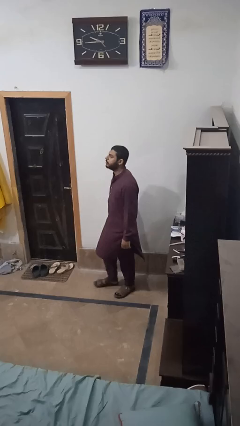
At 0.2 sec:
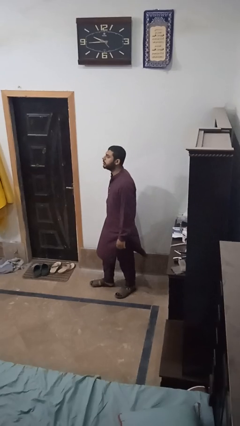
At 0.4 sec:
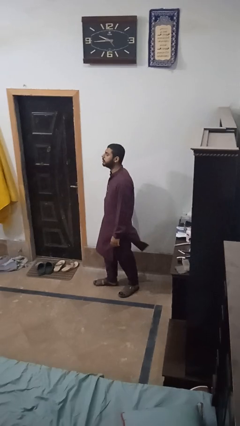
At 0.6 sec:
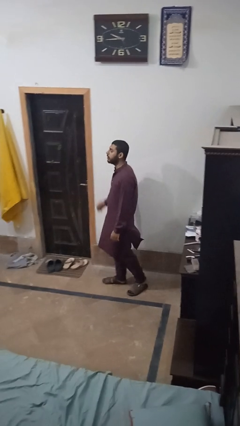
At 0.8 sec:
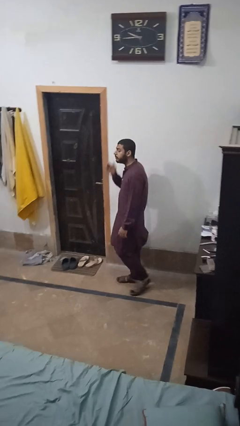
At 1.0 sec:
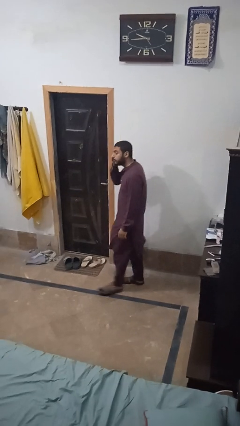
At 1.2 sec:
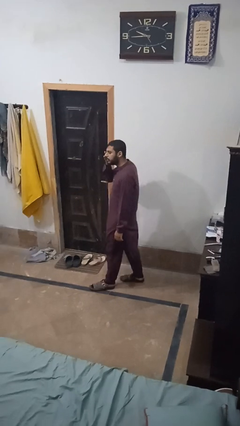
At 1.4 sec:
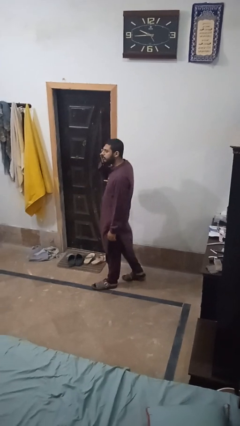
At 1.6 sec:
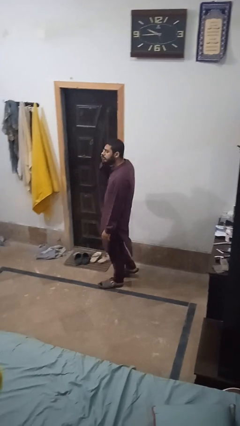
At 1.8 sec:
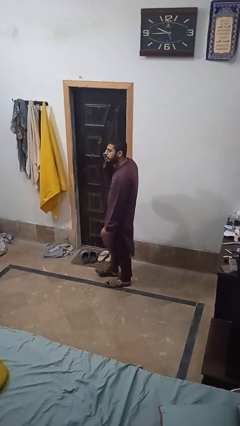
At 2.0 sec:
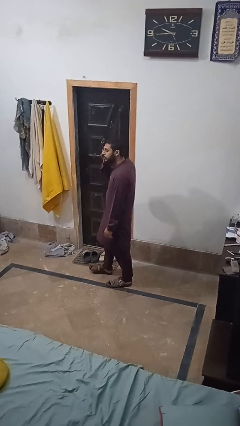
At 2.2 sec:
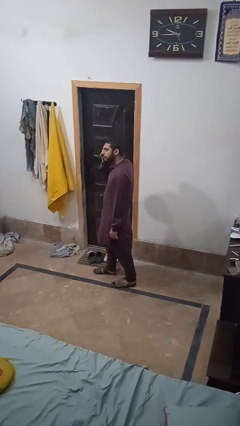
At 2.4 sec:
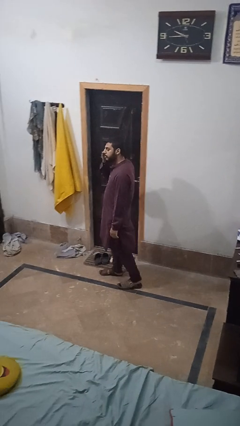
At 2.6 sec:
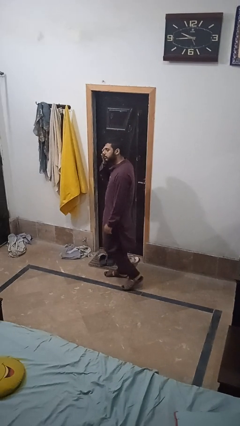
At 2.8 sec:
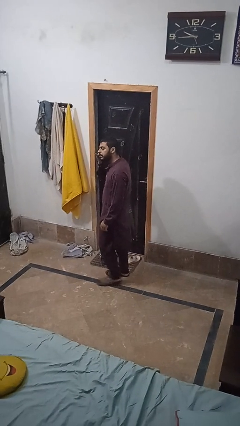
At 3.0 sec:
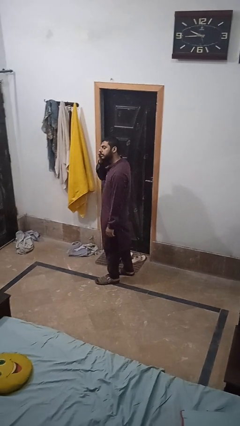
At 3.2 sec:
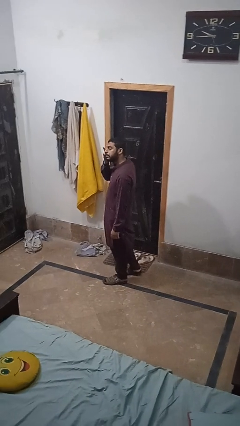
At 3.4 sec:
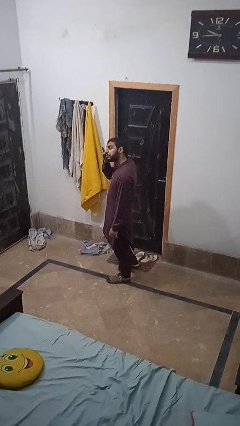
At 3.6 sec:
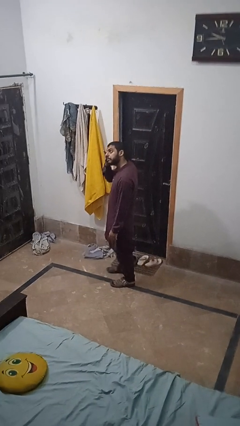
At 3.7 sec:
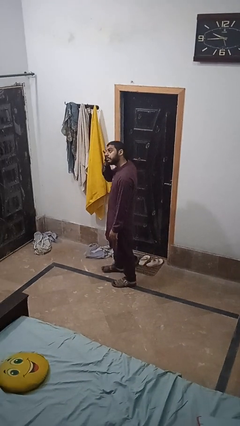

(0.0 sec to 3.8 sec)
person rubs eyes

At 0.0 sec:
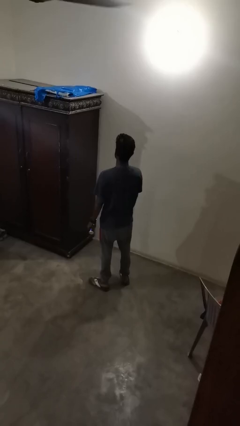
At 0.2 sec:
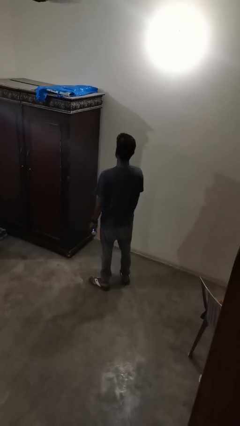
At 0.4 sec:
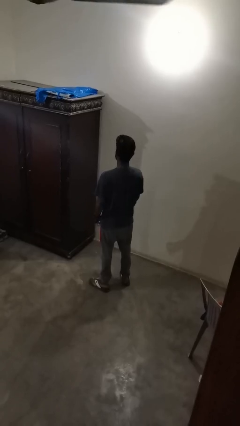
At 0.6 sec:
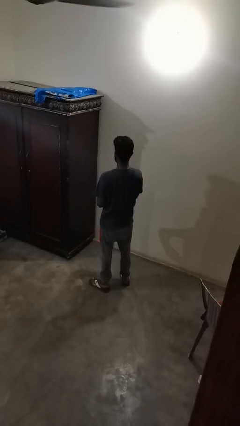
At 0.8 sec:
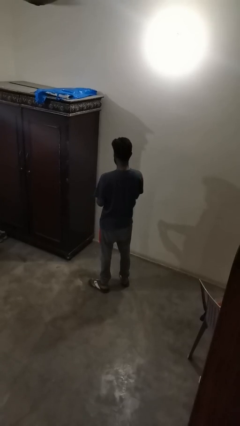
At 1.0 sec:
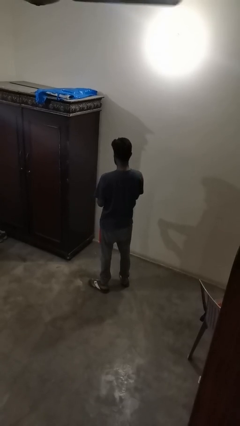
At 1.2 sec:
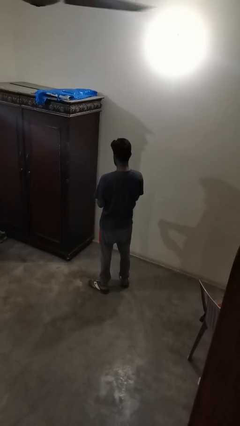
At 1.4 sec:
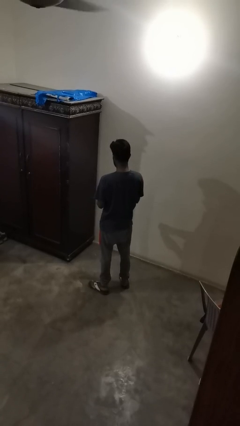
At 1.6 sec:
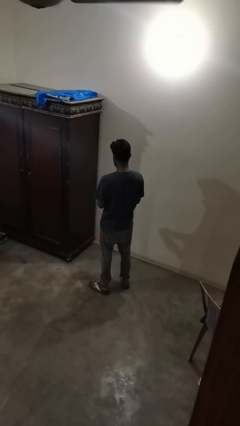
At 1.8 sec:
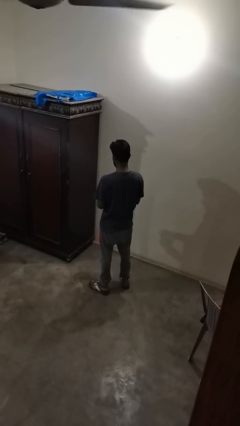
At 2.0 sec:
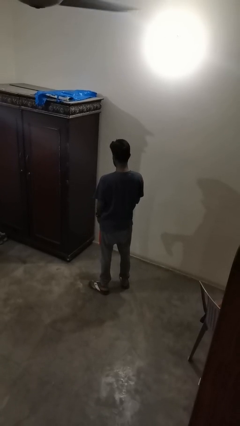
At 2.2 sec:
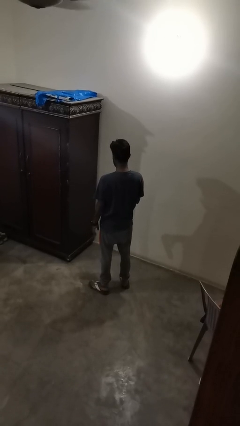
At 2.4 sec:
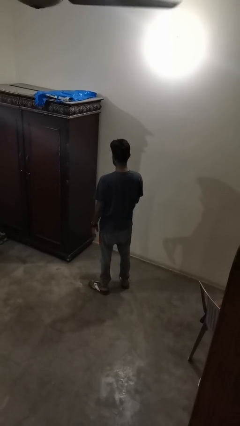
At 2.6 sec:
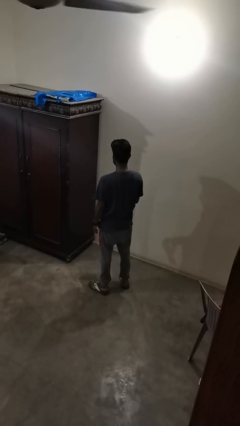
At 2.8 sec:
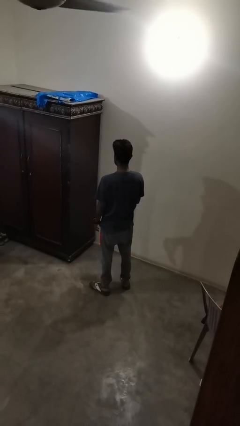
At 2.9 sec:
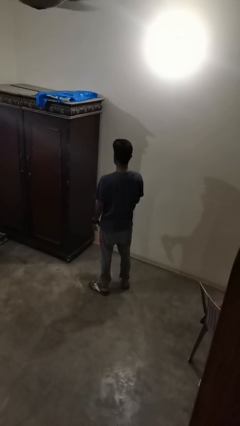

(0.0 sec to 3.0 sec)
person opens beverage can

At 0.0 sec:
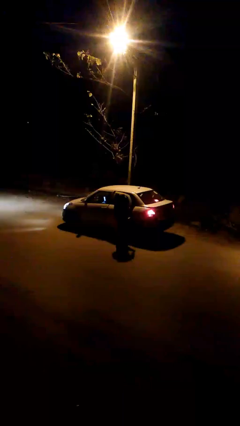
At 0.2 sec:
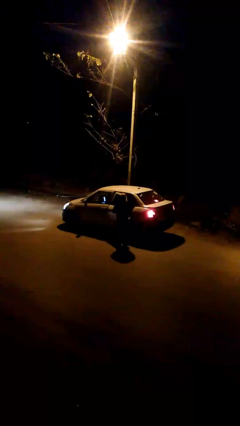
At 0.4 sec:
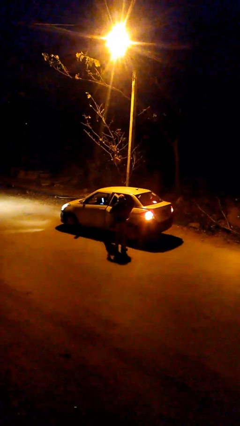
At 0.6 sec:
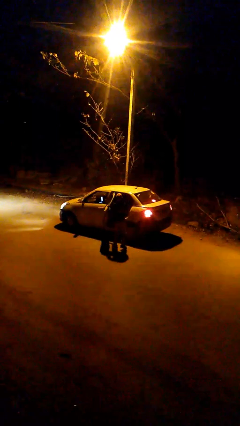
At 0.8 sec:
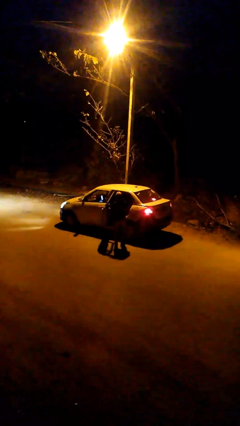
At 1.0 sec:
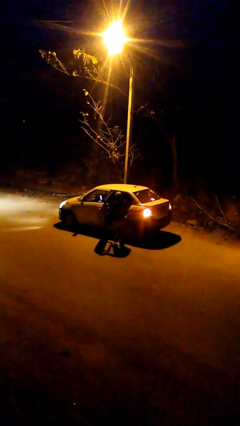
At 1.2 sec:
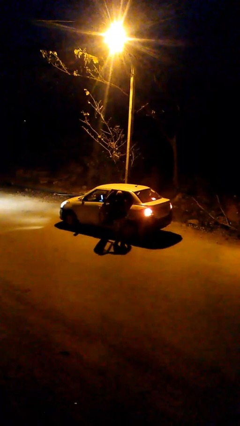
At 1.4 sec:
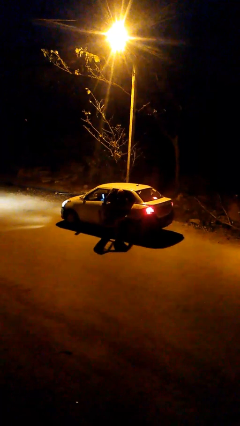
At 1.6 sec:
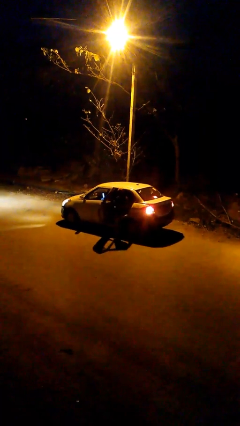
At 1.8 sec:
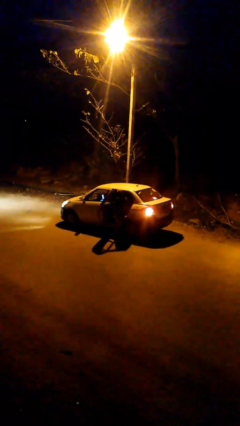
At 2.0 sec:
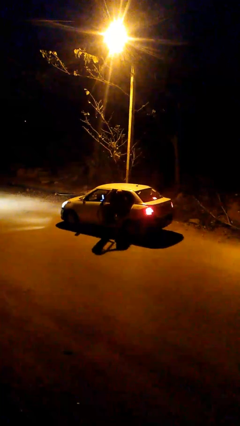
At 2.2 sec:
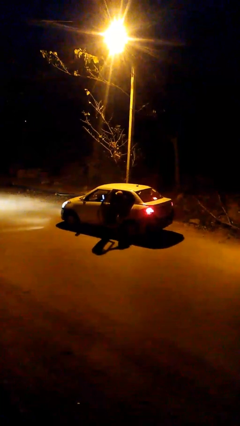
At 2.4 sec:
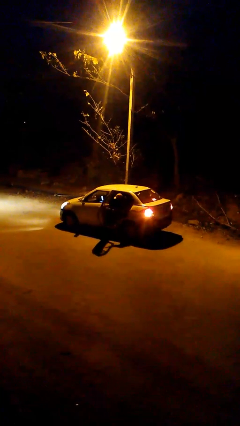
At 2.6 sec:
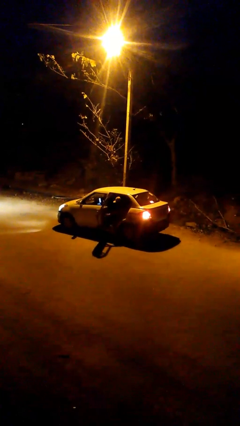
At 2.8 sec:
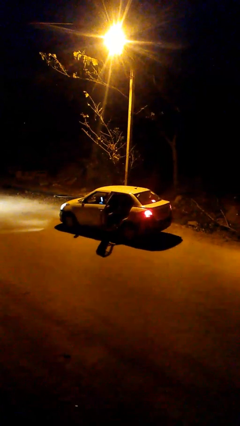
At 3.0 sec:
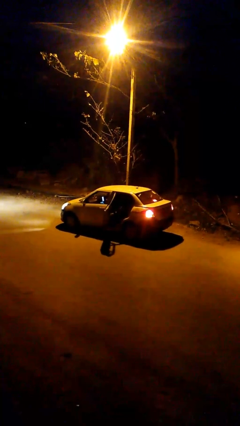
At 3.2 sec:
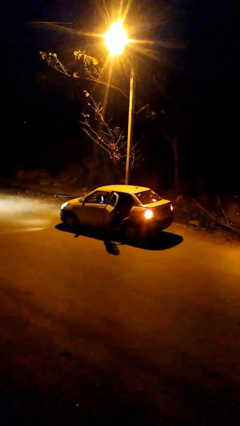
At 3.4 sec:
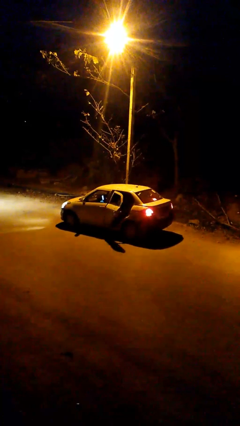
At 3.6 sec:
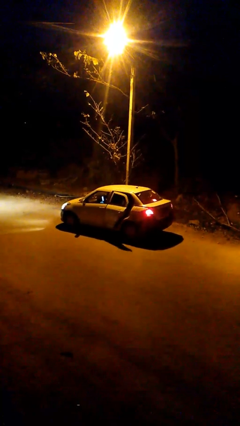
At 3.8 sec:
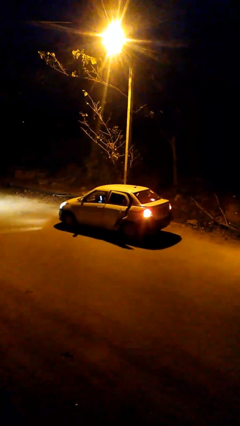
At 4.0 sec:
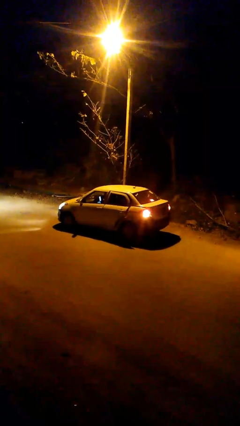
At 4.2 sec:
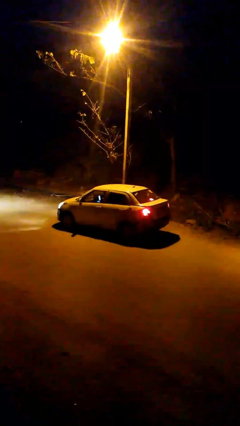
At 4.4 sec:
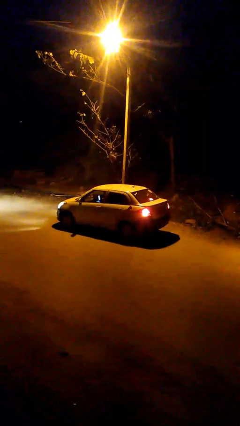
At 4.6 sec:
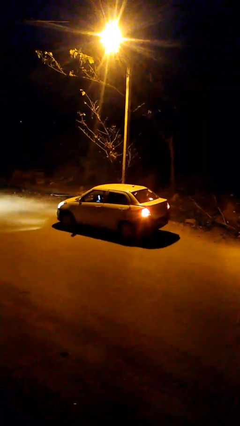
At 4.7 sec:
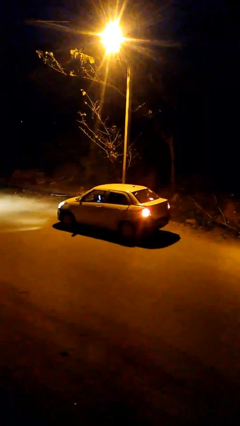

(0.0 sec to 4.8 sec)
car picks up person

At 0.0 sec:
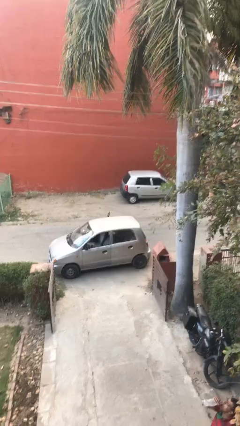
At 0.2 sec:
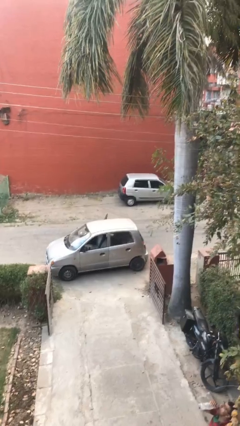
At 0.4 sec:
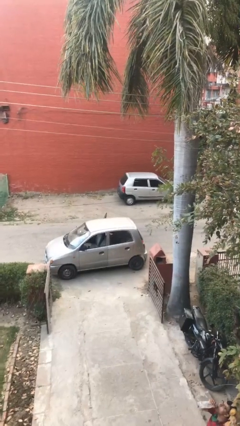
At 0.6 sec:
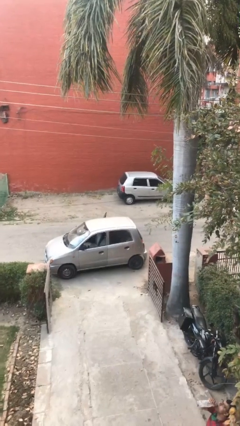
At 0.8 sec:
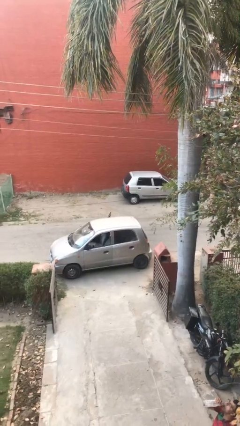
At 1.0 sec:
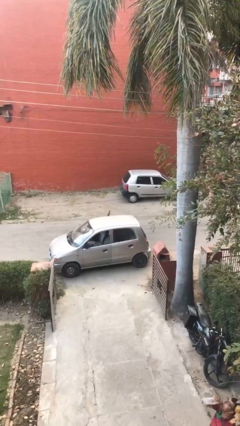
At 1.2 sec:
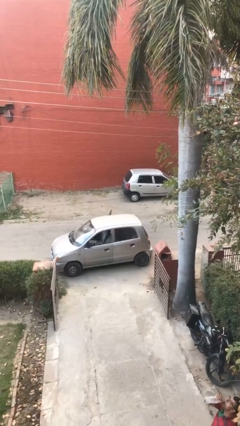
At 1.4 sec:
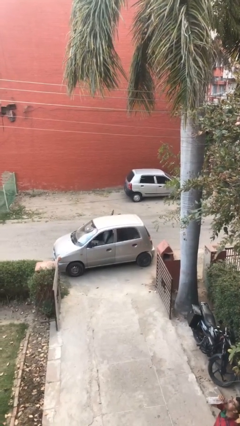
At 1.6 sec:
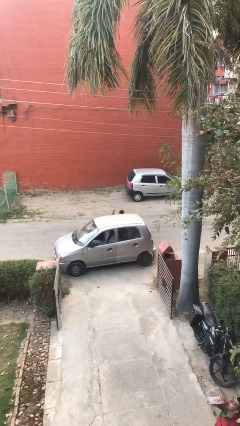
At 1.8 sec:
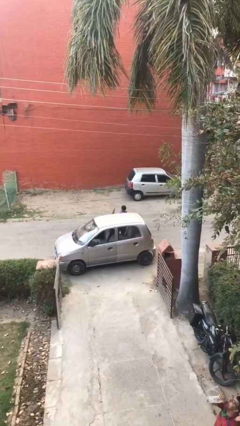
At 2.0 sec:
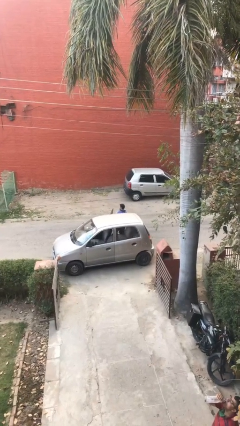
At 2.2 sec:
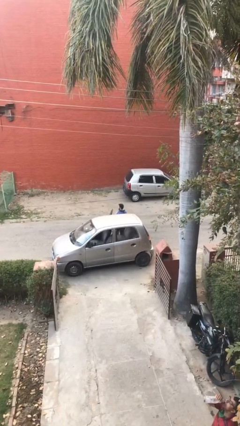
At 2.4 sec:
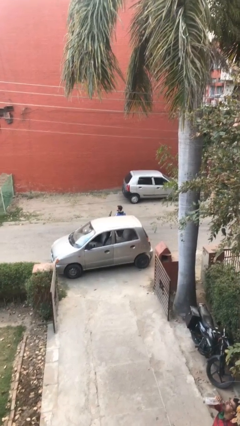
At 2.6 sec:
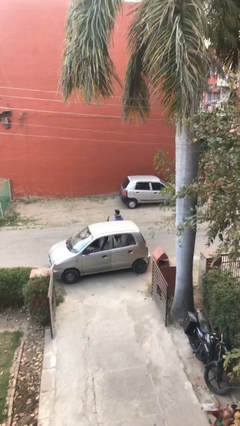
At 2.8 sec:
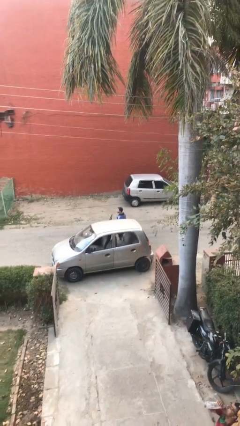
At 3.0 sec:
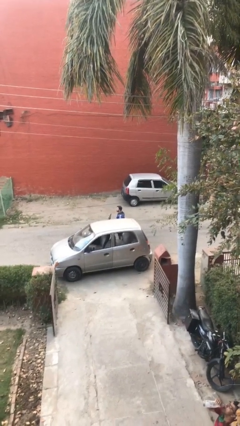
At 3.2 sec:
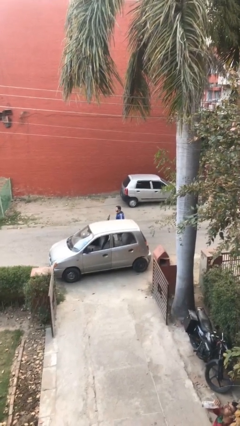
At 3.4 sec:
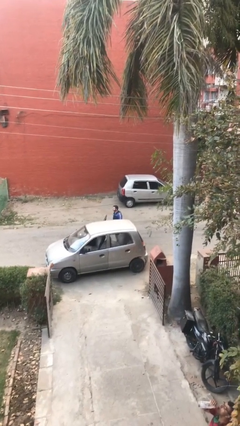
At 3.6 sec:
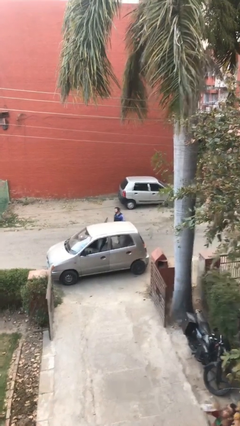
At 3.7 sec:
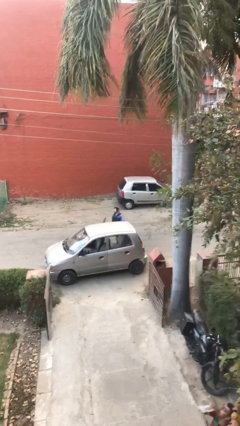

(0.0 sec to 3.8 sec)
person exits car

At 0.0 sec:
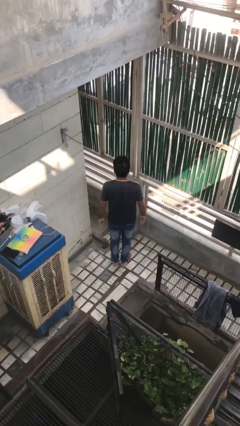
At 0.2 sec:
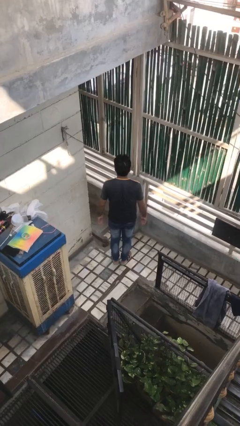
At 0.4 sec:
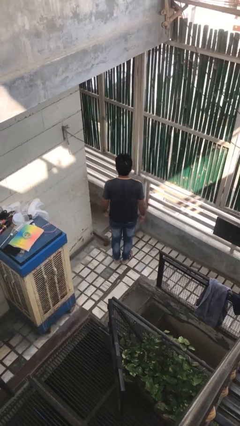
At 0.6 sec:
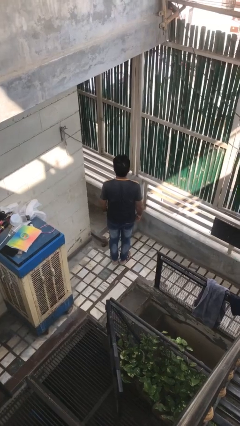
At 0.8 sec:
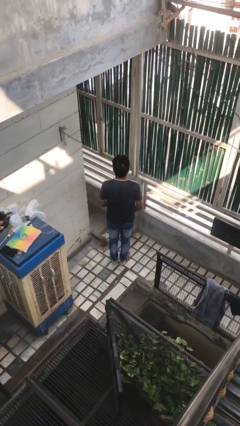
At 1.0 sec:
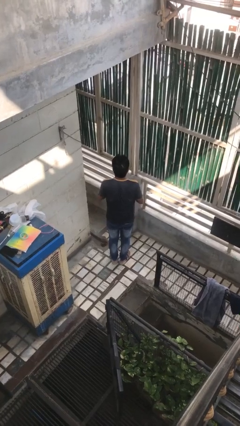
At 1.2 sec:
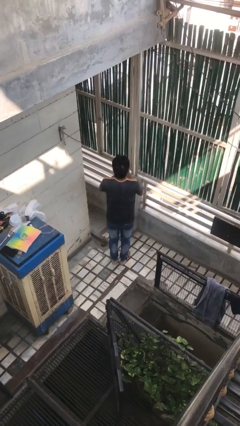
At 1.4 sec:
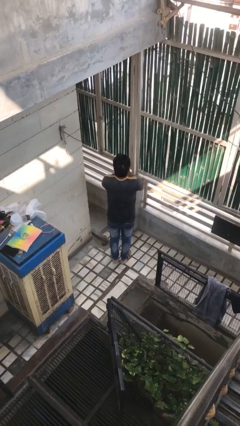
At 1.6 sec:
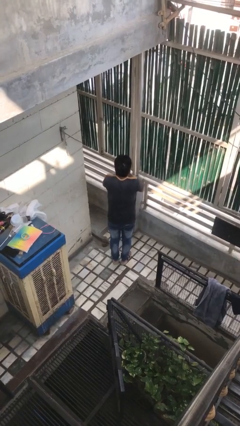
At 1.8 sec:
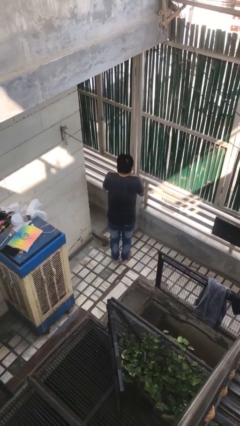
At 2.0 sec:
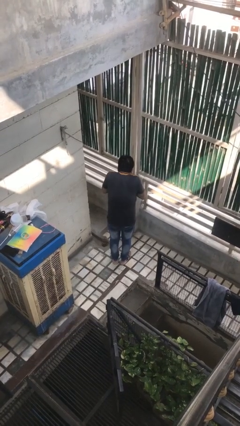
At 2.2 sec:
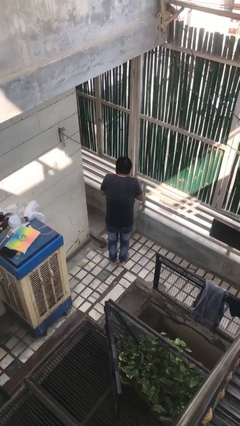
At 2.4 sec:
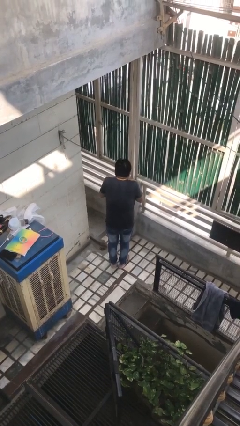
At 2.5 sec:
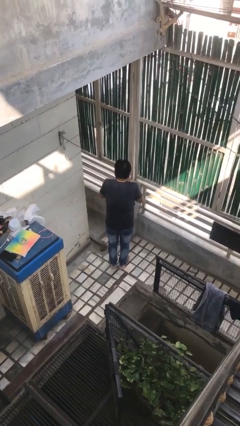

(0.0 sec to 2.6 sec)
person sneezes into hand
